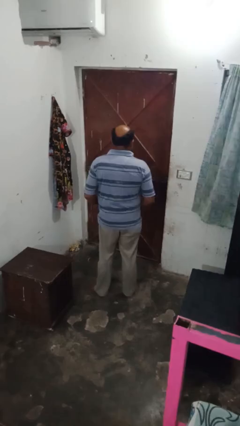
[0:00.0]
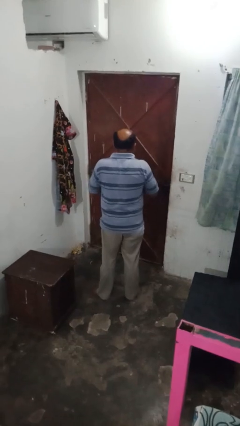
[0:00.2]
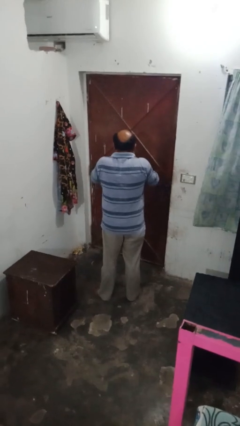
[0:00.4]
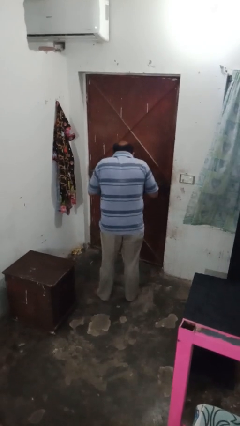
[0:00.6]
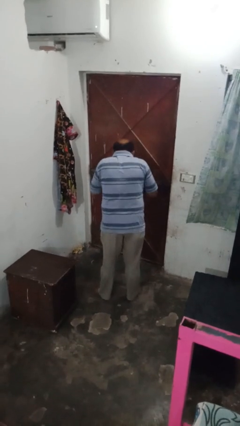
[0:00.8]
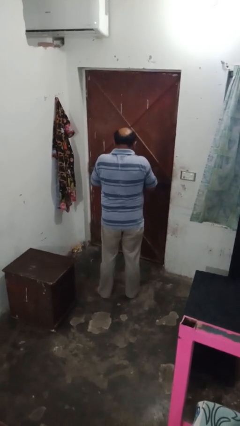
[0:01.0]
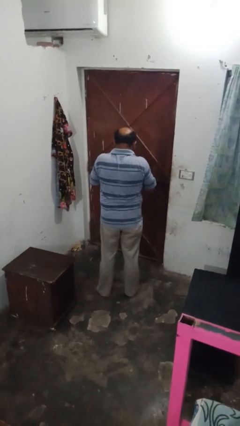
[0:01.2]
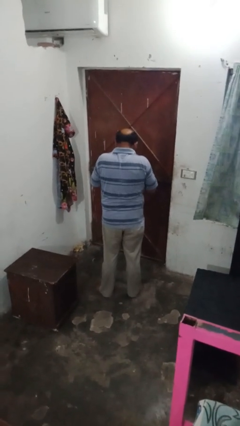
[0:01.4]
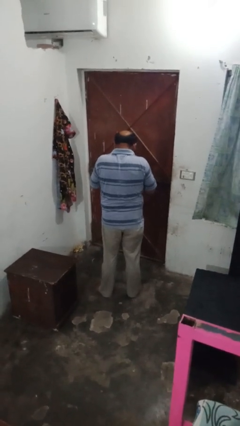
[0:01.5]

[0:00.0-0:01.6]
person blows nose

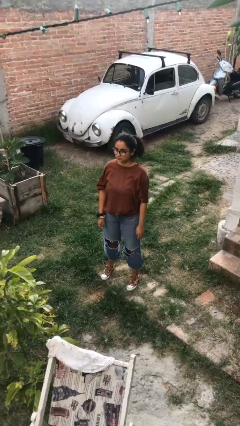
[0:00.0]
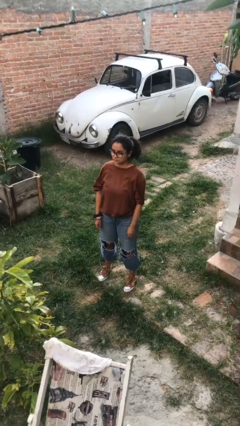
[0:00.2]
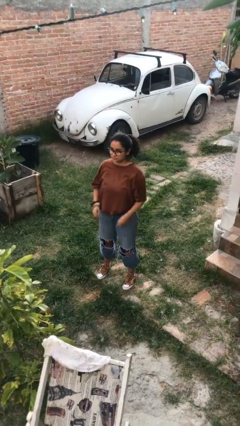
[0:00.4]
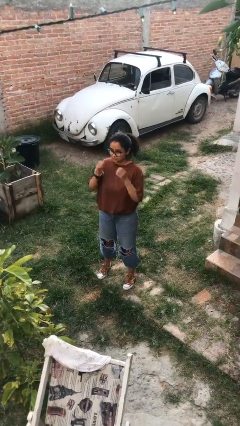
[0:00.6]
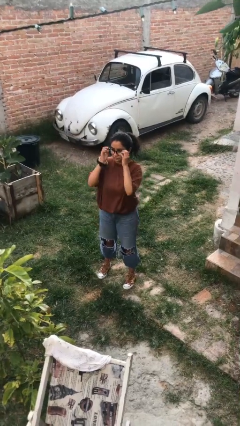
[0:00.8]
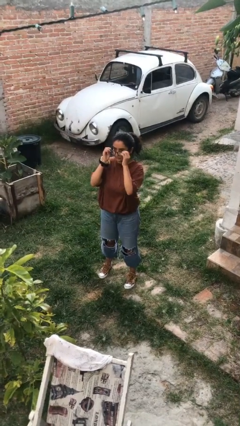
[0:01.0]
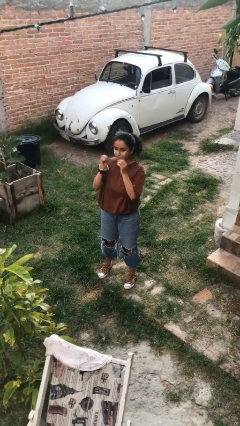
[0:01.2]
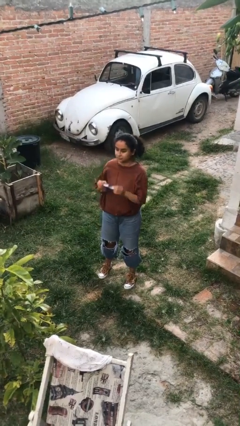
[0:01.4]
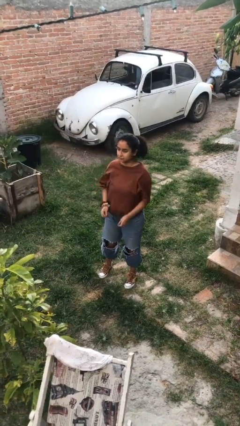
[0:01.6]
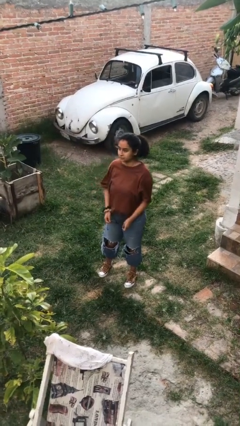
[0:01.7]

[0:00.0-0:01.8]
person takes off glasses

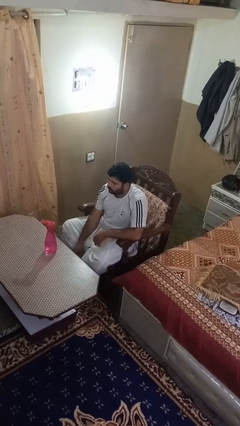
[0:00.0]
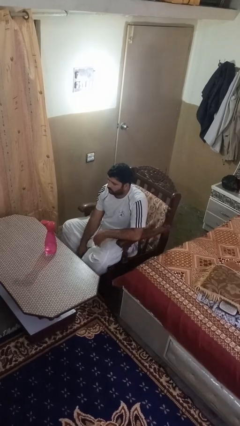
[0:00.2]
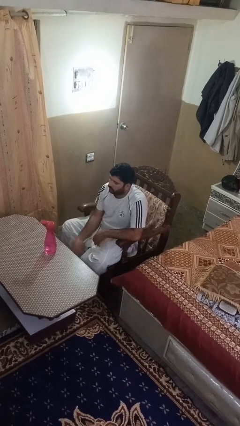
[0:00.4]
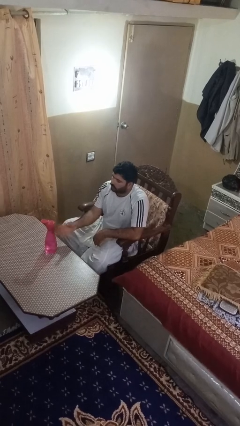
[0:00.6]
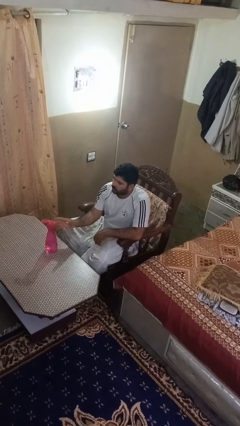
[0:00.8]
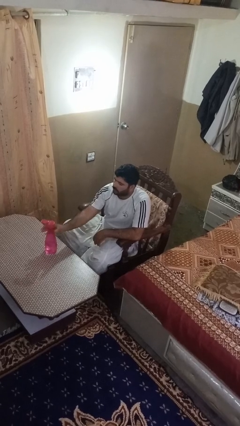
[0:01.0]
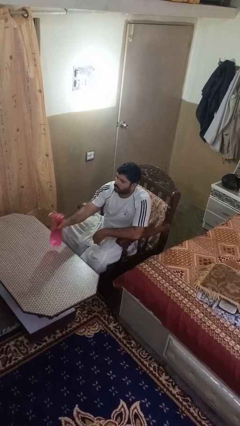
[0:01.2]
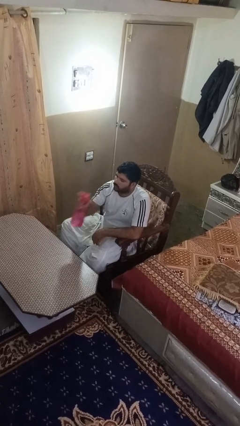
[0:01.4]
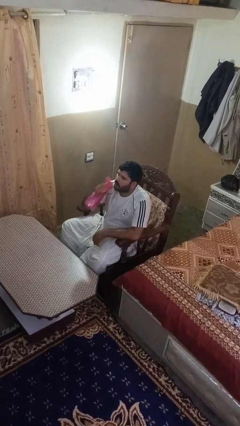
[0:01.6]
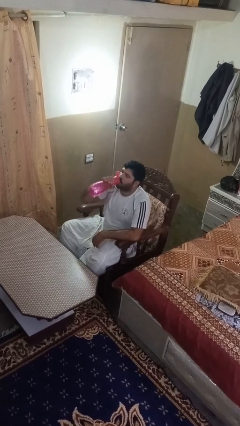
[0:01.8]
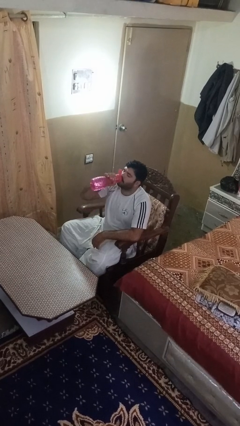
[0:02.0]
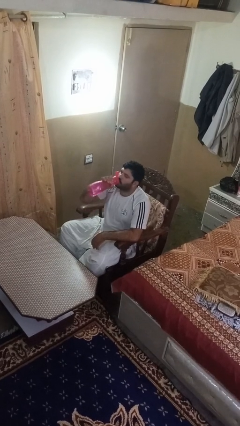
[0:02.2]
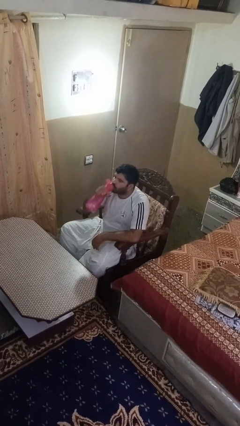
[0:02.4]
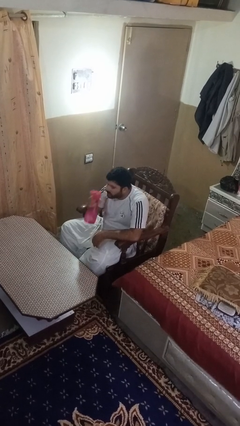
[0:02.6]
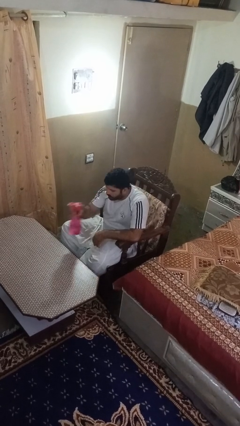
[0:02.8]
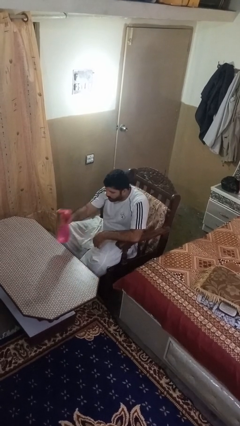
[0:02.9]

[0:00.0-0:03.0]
person drinks from bottle

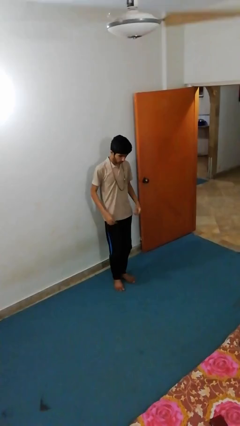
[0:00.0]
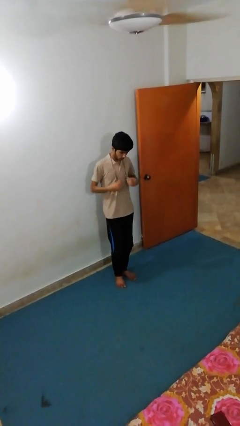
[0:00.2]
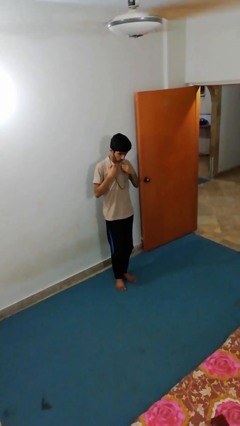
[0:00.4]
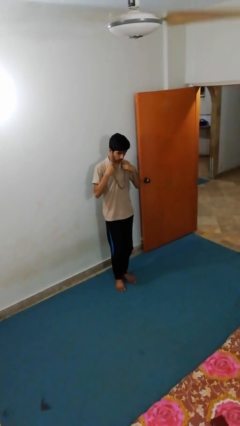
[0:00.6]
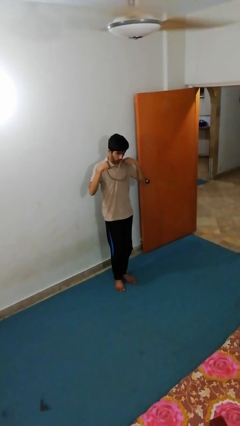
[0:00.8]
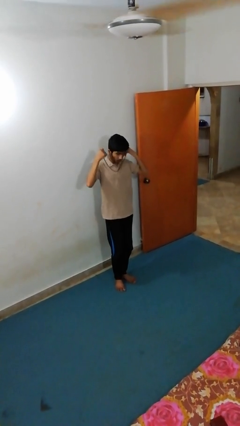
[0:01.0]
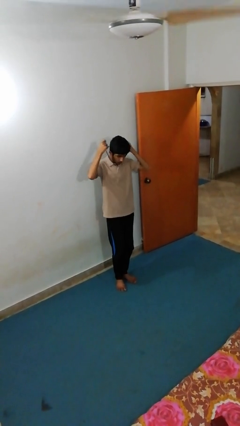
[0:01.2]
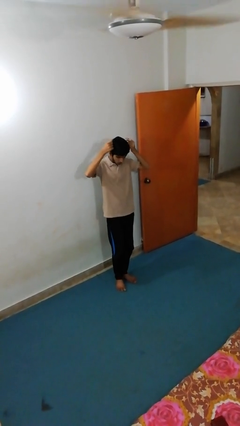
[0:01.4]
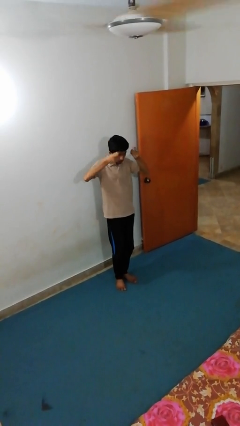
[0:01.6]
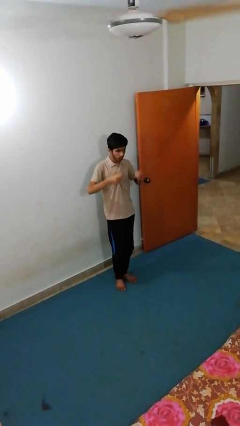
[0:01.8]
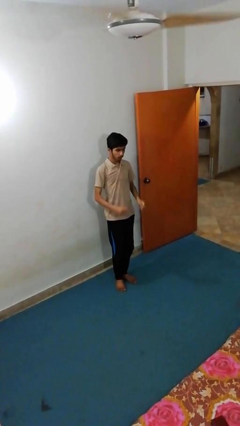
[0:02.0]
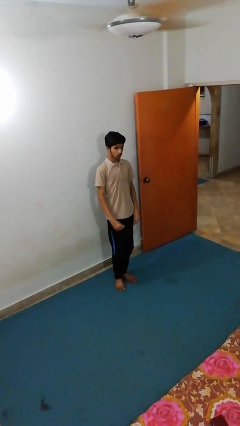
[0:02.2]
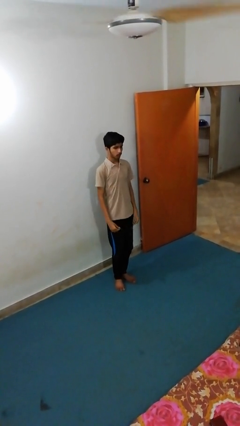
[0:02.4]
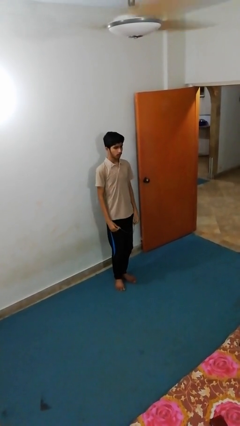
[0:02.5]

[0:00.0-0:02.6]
person takes off necklace

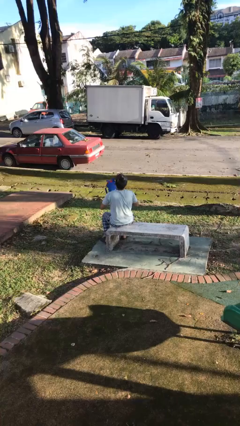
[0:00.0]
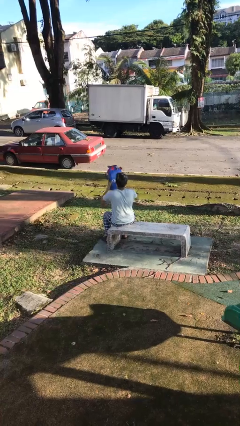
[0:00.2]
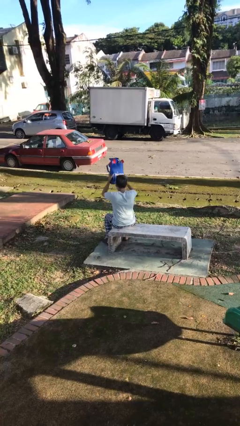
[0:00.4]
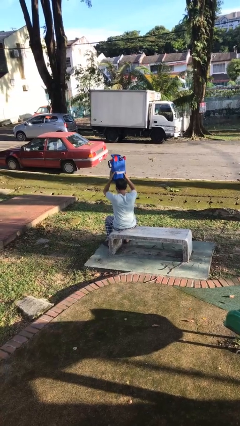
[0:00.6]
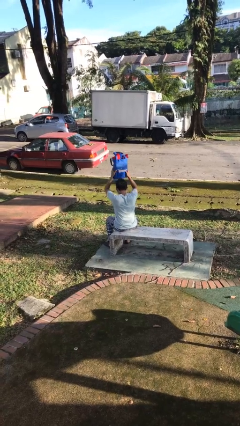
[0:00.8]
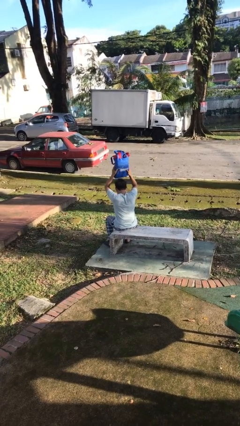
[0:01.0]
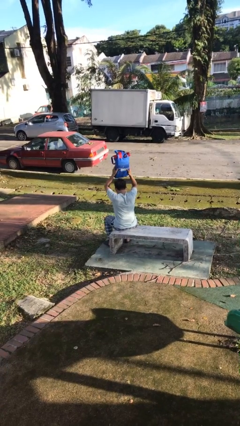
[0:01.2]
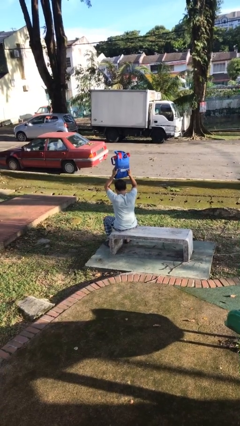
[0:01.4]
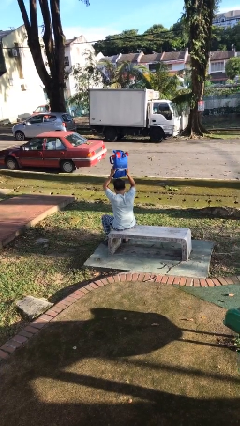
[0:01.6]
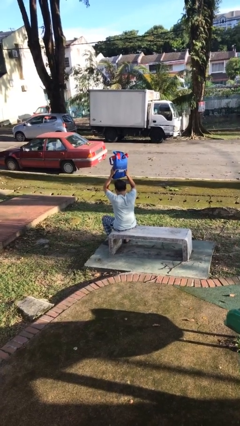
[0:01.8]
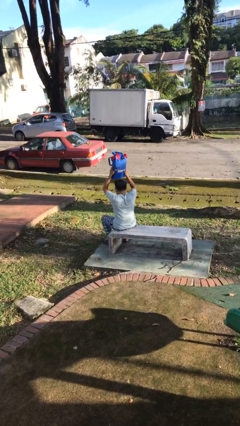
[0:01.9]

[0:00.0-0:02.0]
person holds object above head

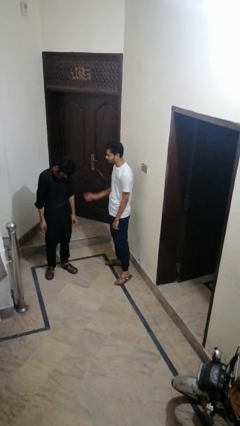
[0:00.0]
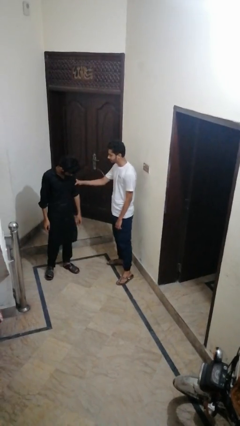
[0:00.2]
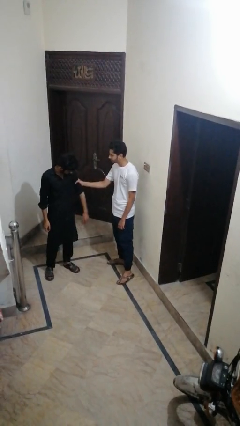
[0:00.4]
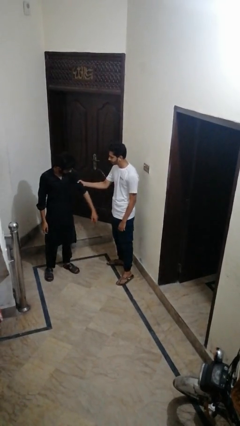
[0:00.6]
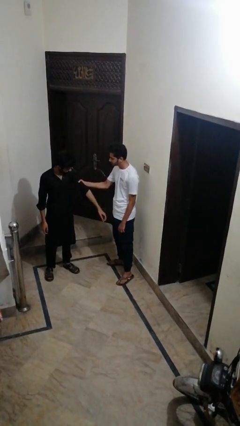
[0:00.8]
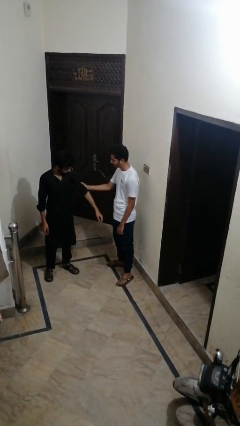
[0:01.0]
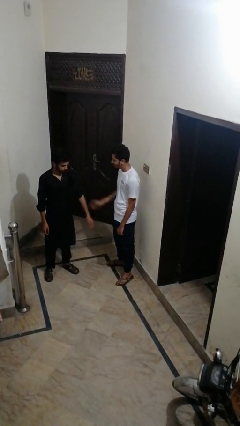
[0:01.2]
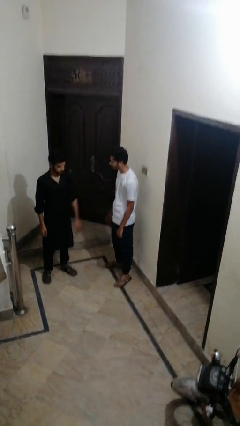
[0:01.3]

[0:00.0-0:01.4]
person grabs person by bicep

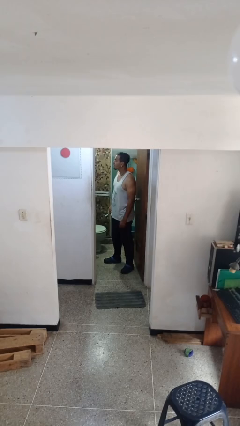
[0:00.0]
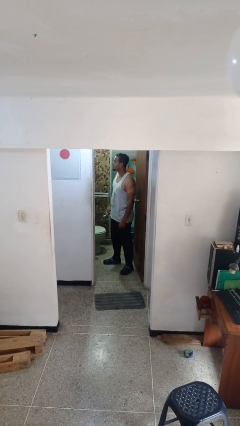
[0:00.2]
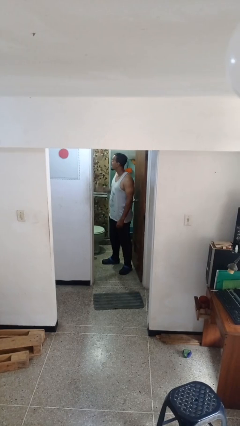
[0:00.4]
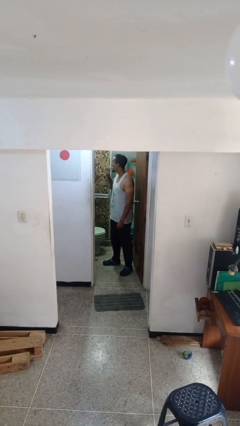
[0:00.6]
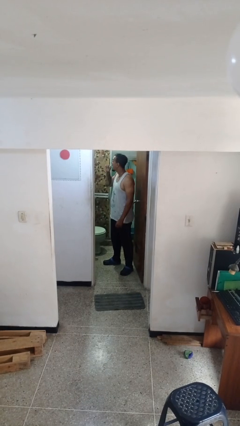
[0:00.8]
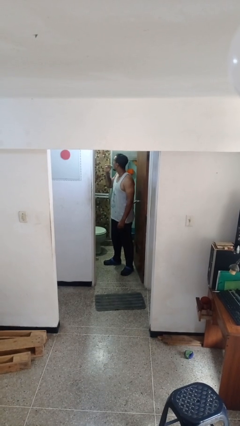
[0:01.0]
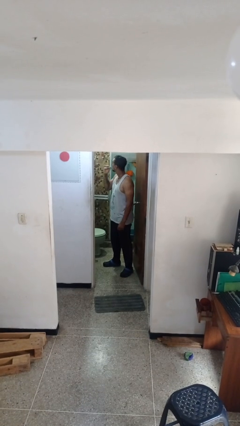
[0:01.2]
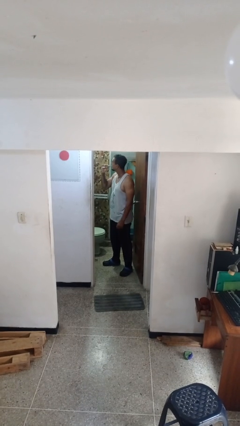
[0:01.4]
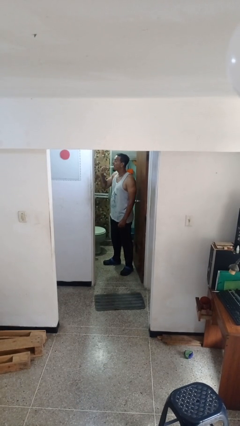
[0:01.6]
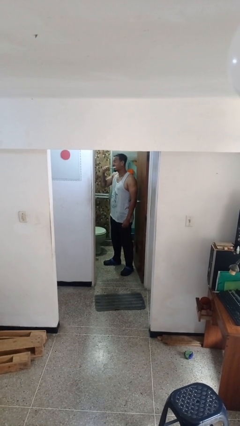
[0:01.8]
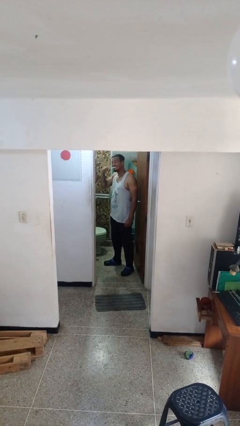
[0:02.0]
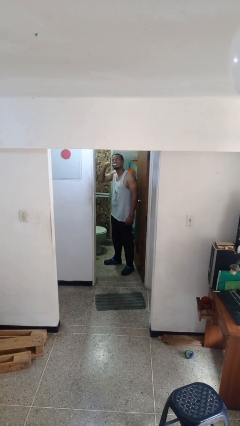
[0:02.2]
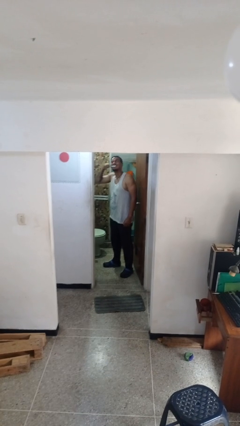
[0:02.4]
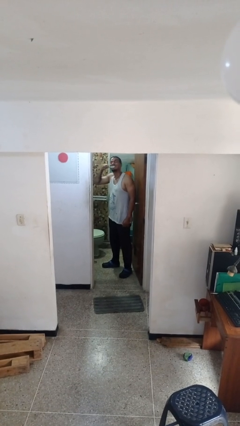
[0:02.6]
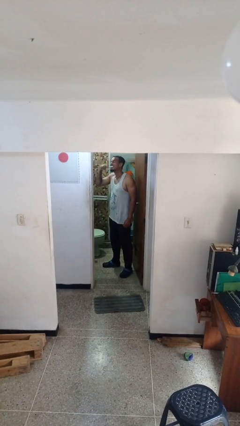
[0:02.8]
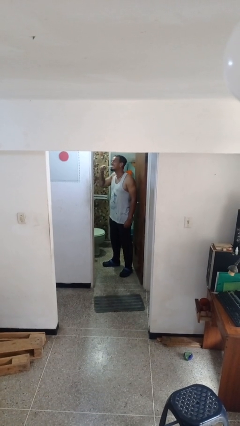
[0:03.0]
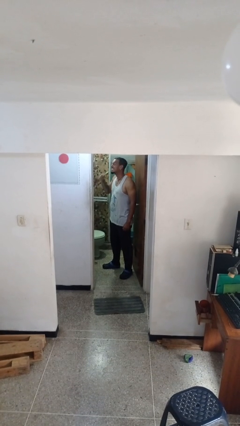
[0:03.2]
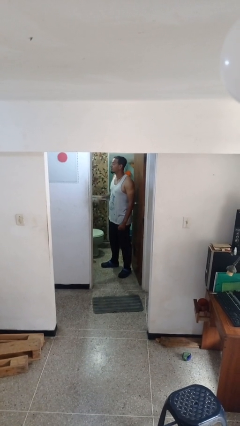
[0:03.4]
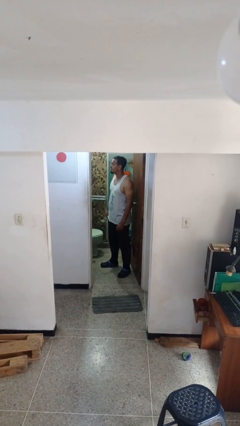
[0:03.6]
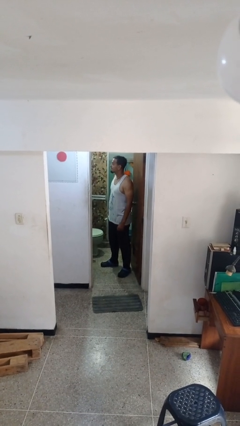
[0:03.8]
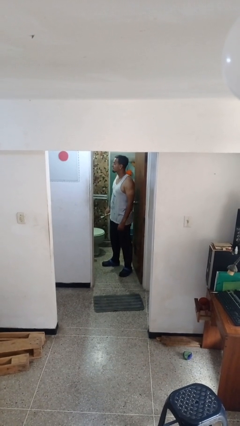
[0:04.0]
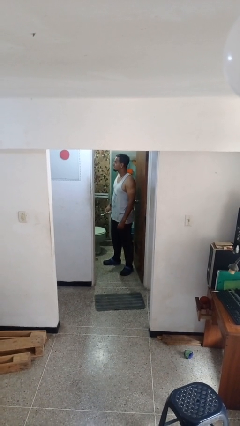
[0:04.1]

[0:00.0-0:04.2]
person brushes teeth
